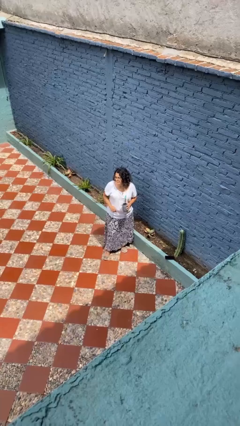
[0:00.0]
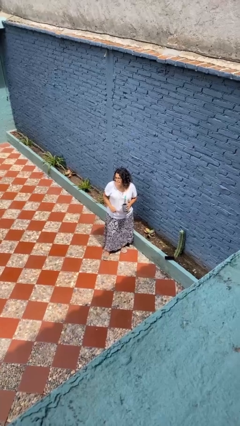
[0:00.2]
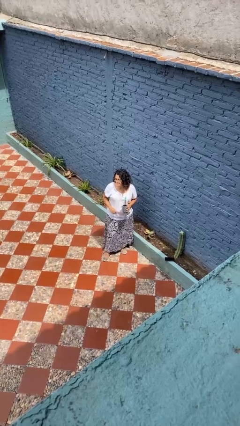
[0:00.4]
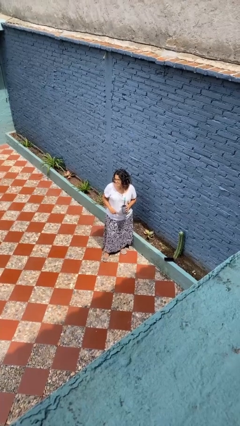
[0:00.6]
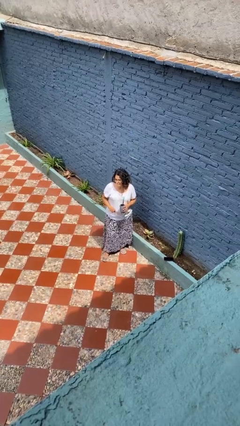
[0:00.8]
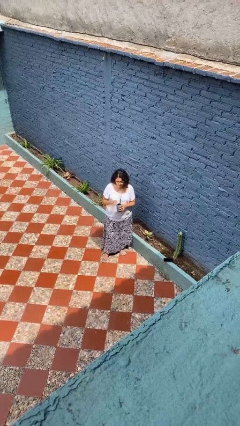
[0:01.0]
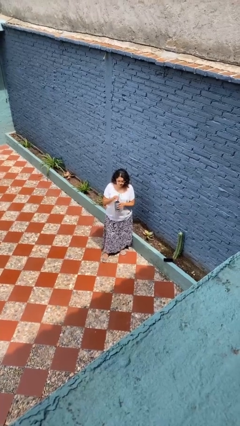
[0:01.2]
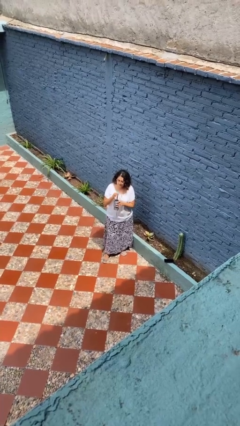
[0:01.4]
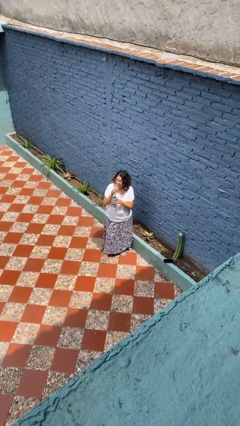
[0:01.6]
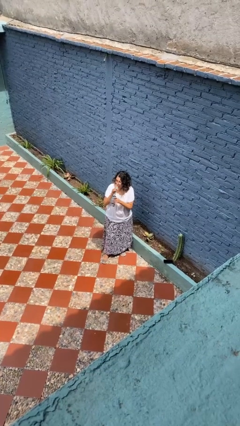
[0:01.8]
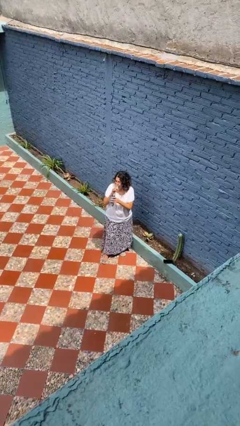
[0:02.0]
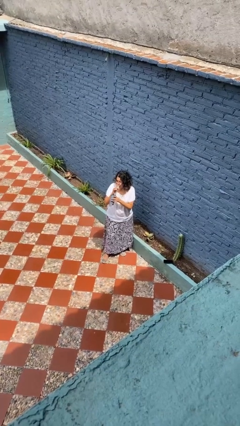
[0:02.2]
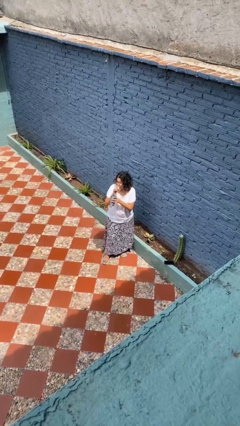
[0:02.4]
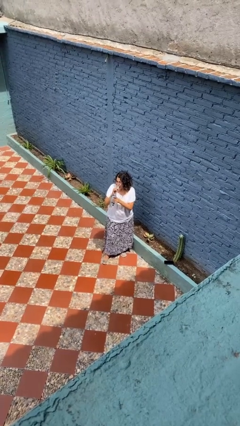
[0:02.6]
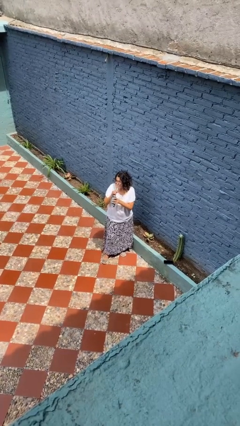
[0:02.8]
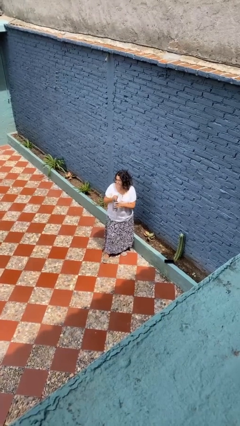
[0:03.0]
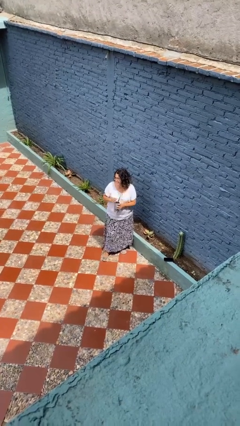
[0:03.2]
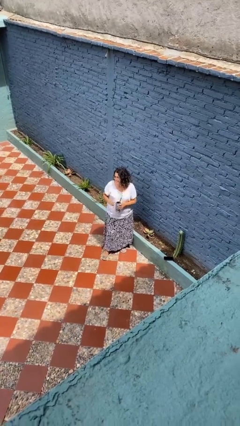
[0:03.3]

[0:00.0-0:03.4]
person drinks from straw

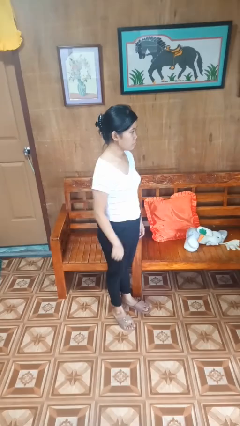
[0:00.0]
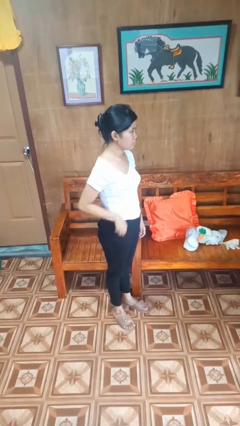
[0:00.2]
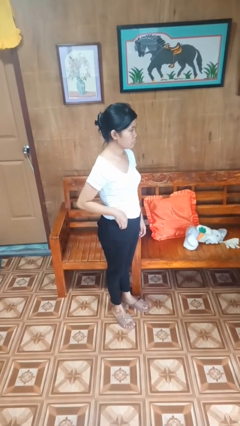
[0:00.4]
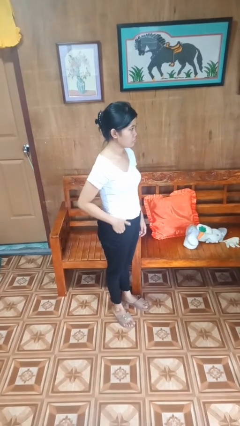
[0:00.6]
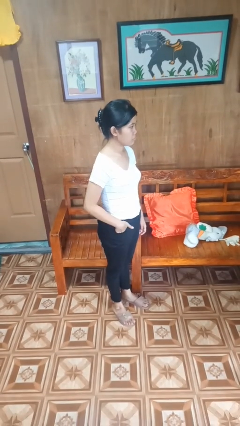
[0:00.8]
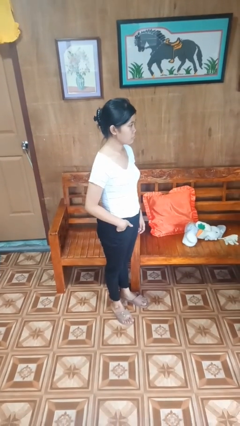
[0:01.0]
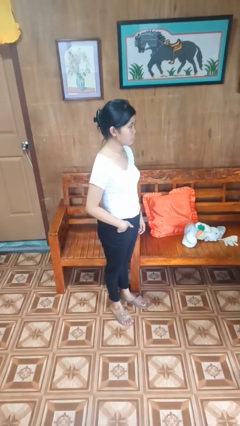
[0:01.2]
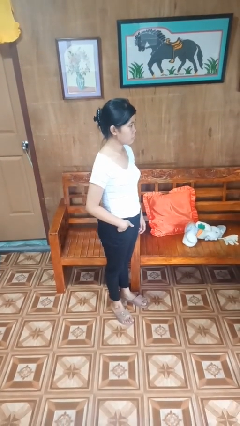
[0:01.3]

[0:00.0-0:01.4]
person puts hands in back pockets

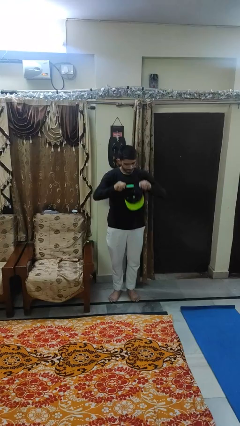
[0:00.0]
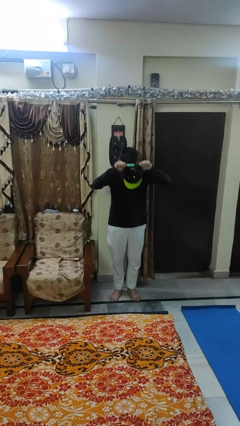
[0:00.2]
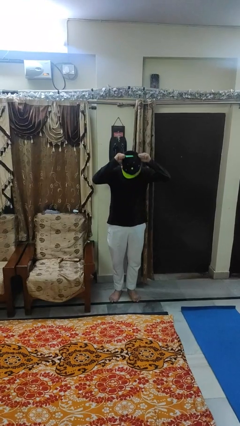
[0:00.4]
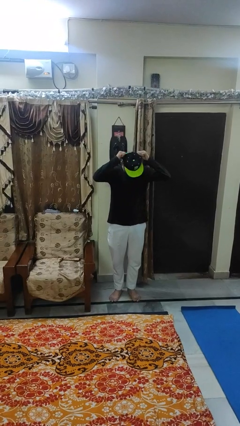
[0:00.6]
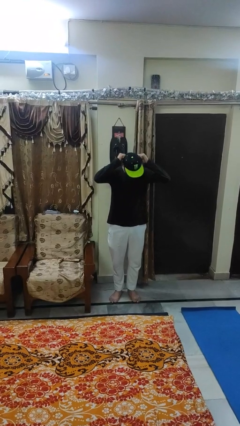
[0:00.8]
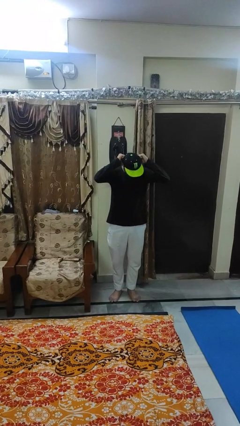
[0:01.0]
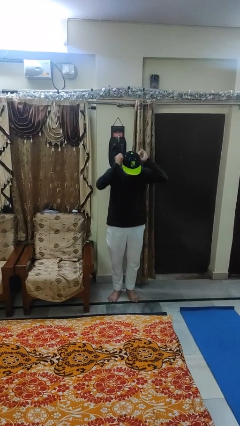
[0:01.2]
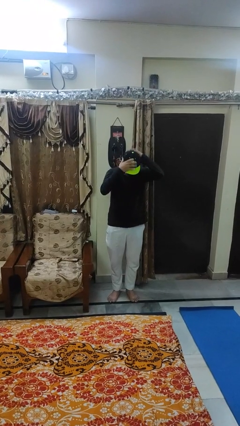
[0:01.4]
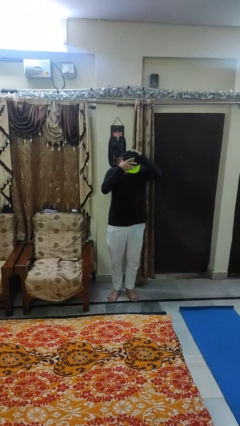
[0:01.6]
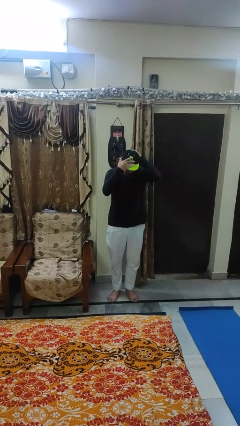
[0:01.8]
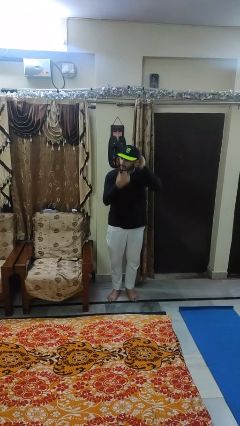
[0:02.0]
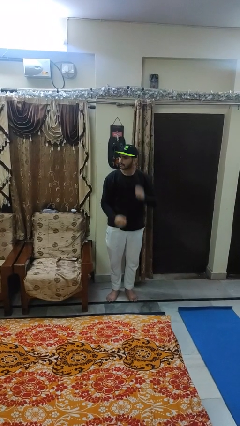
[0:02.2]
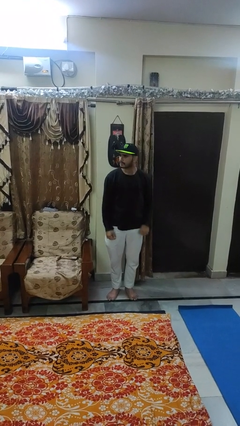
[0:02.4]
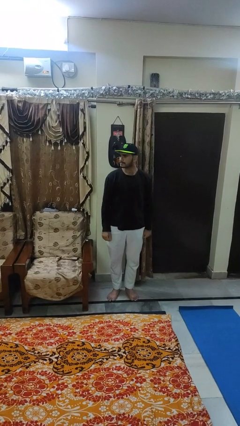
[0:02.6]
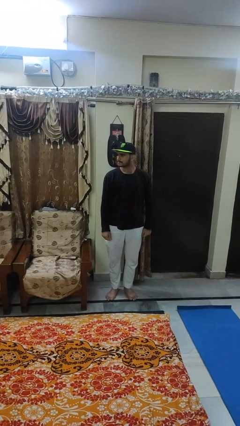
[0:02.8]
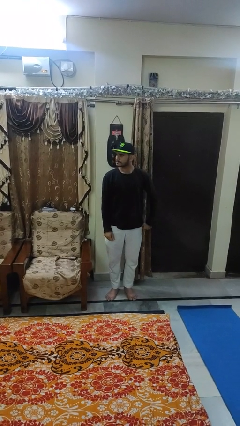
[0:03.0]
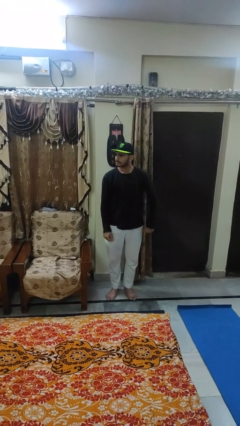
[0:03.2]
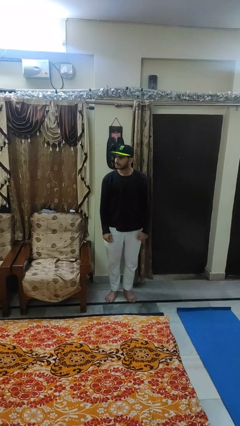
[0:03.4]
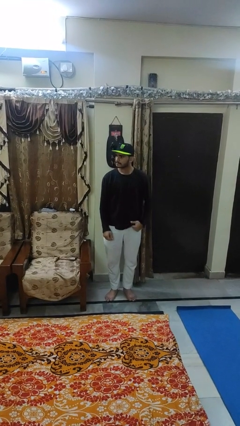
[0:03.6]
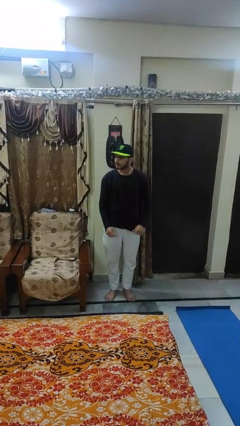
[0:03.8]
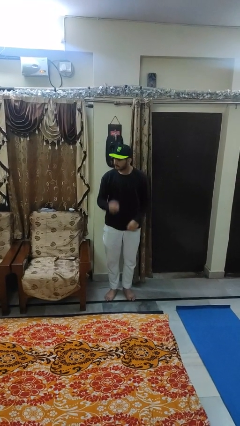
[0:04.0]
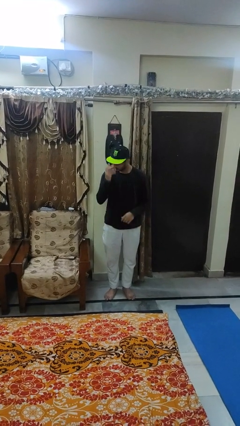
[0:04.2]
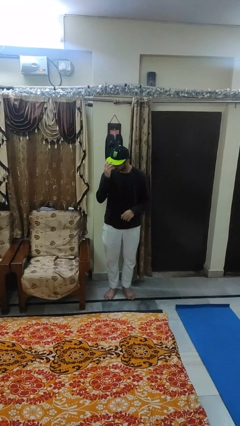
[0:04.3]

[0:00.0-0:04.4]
person puts on hat

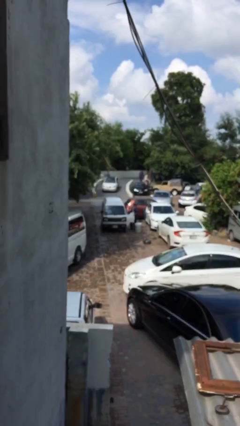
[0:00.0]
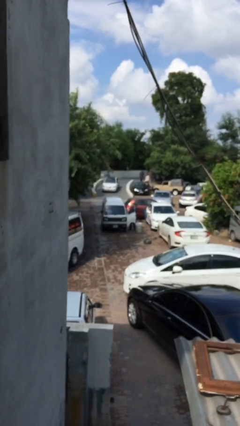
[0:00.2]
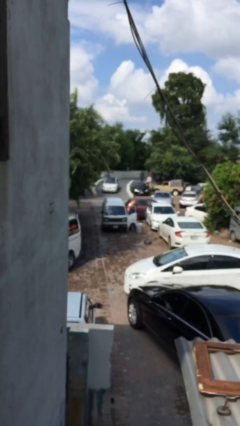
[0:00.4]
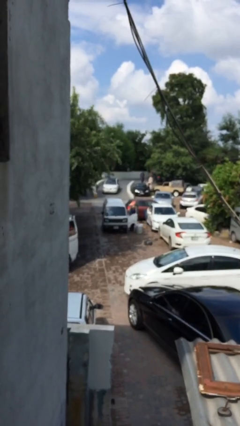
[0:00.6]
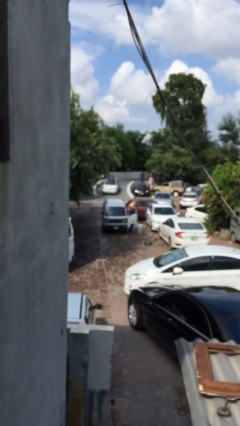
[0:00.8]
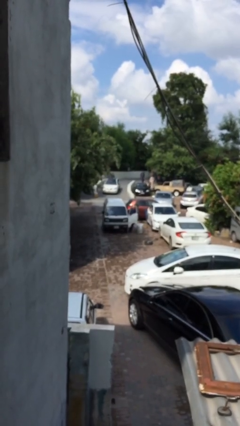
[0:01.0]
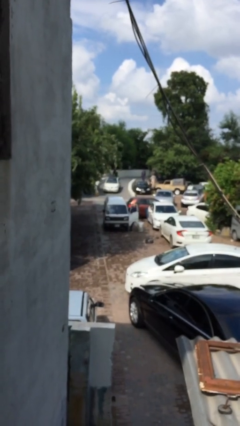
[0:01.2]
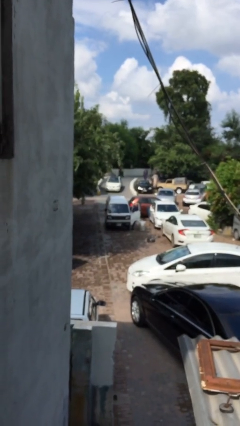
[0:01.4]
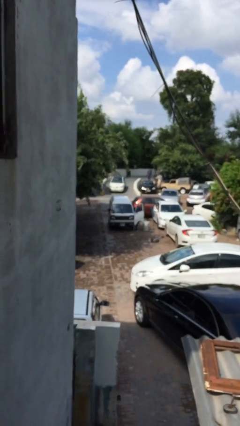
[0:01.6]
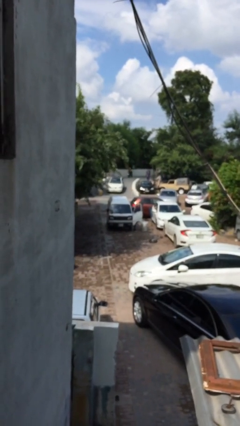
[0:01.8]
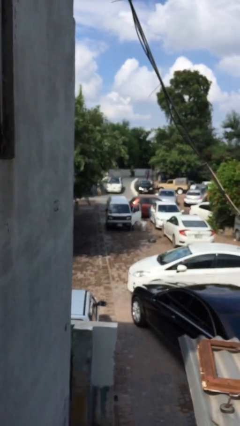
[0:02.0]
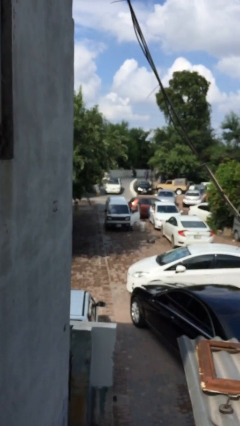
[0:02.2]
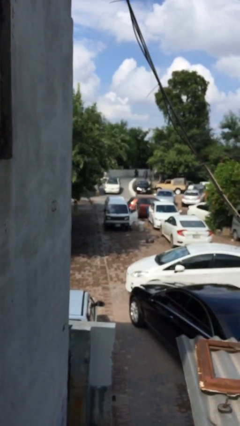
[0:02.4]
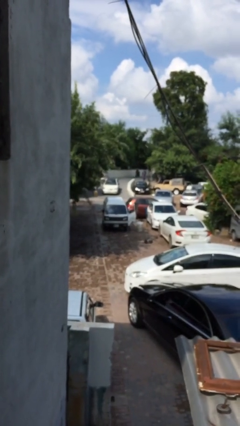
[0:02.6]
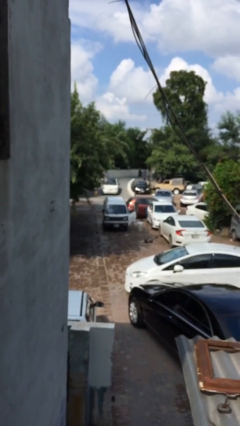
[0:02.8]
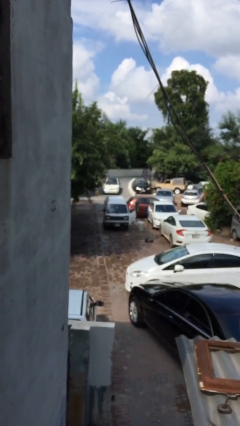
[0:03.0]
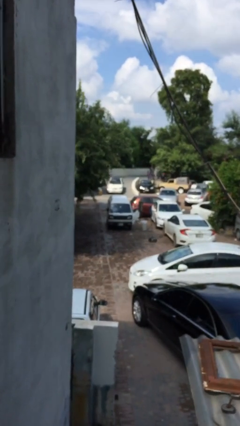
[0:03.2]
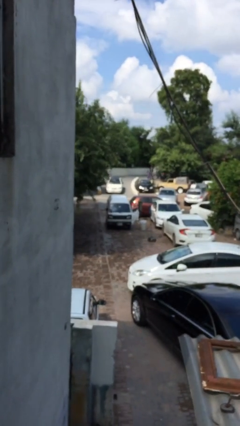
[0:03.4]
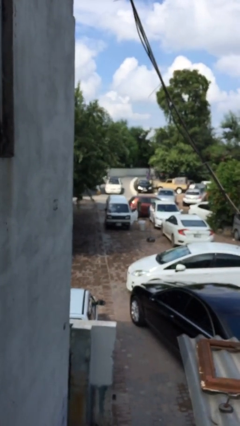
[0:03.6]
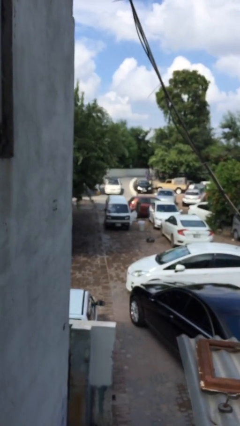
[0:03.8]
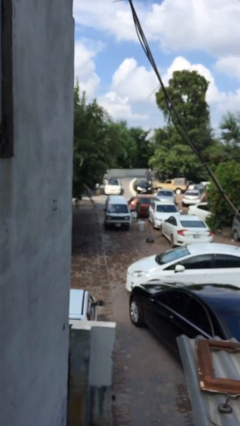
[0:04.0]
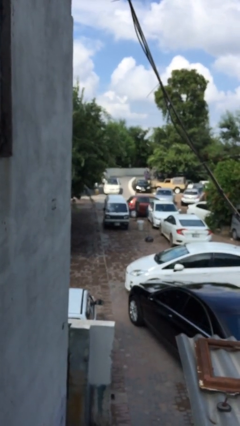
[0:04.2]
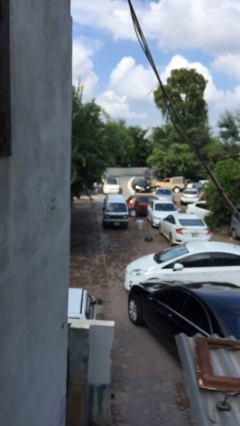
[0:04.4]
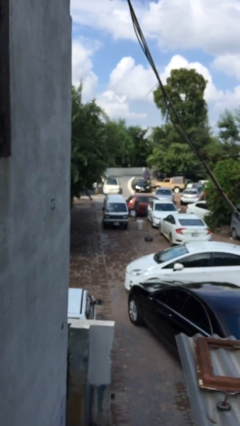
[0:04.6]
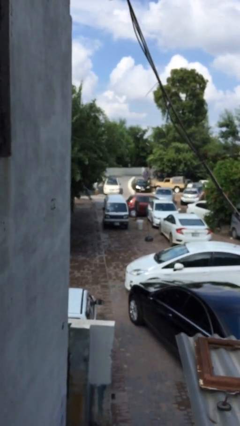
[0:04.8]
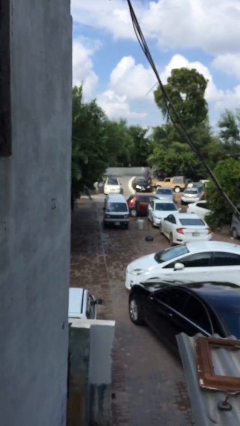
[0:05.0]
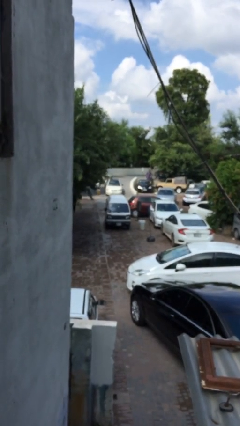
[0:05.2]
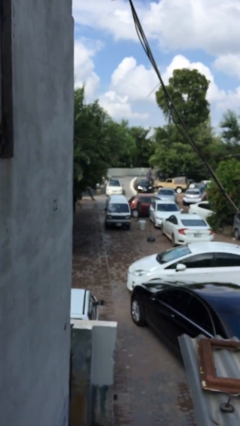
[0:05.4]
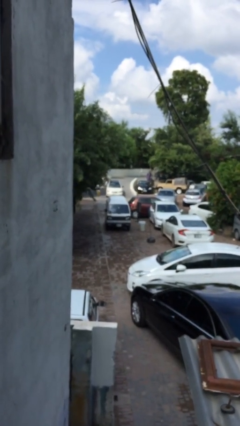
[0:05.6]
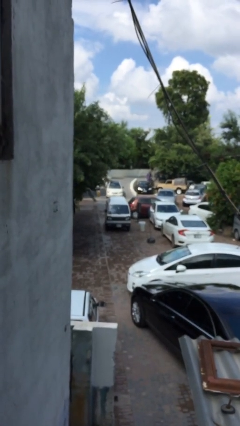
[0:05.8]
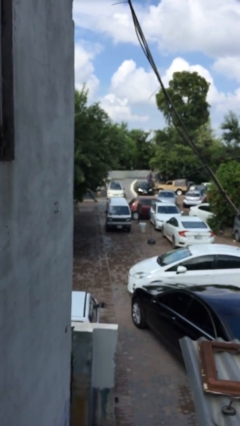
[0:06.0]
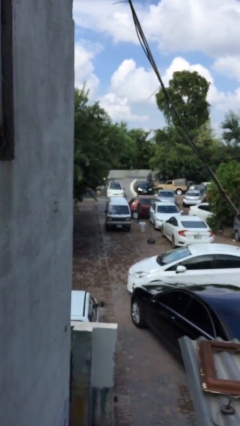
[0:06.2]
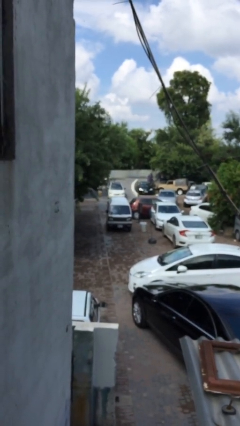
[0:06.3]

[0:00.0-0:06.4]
car picks up person

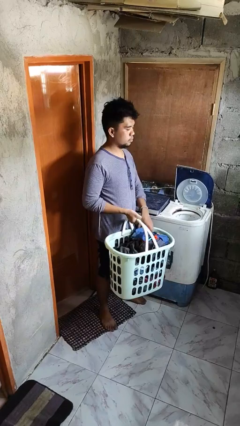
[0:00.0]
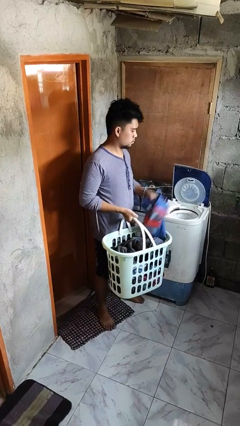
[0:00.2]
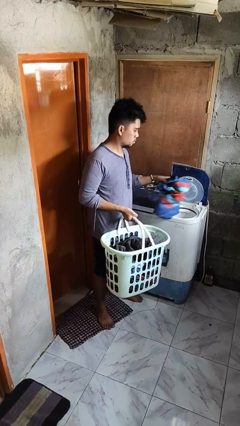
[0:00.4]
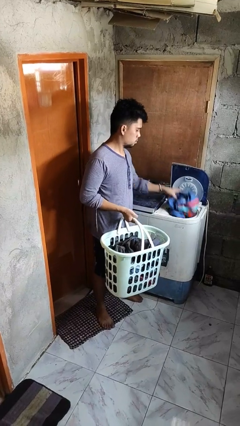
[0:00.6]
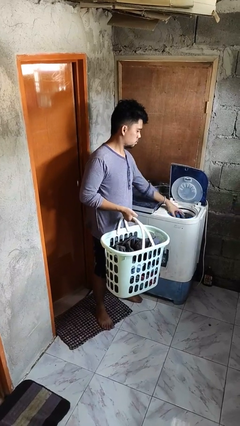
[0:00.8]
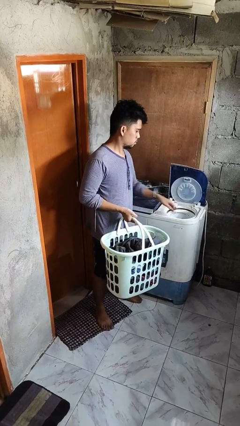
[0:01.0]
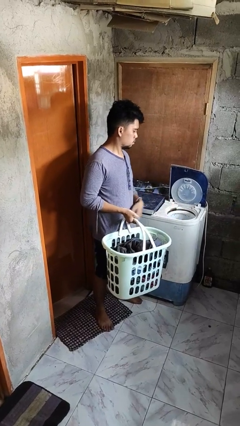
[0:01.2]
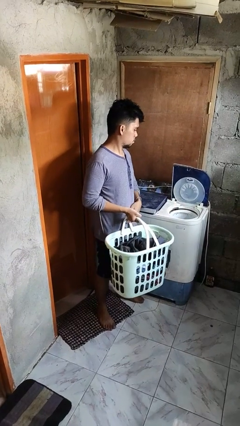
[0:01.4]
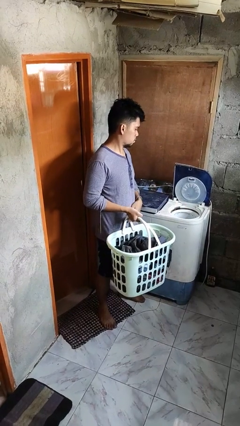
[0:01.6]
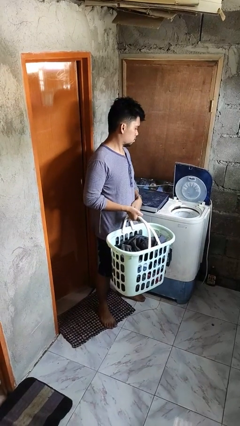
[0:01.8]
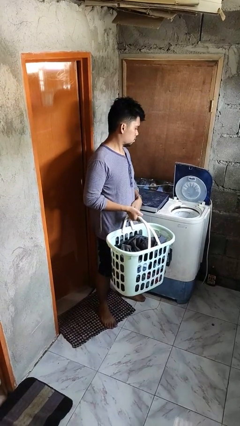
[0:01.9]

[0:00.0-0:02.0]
person loads dryer
